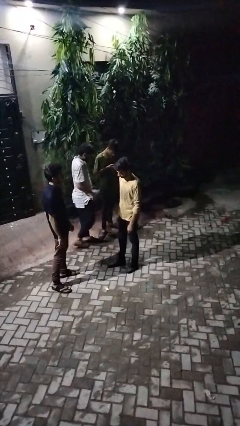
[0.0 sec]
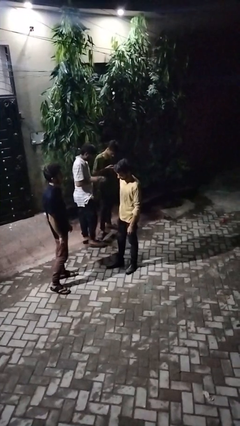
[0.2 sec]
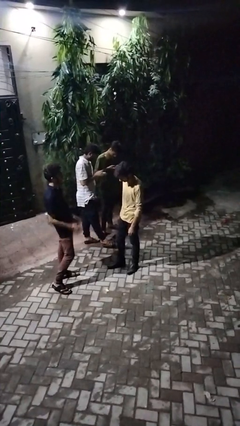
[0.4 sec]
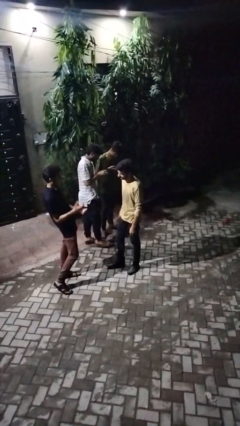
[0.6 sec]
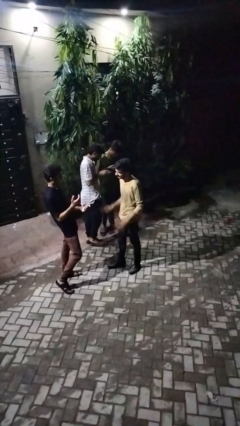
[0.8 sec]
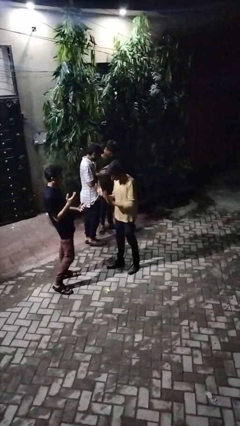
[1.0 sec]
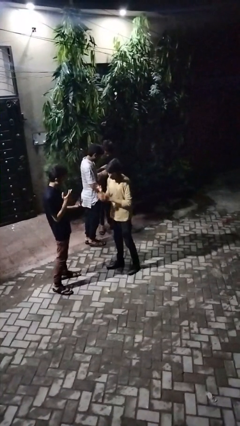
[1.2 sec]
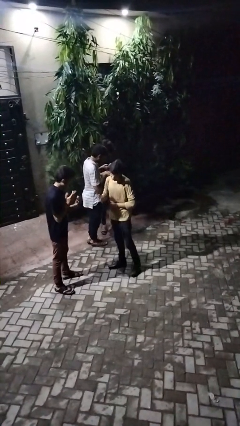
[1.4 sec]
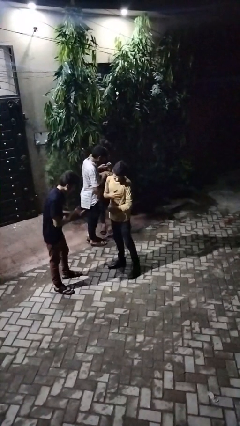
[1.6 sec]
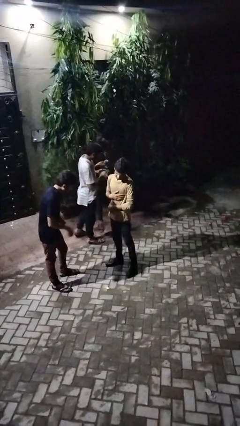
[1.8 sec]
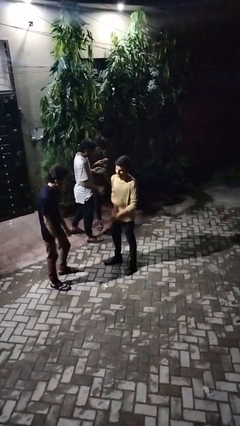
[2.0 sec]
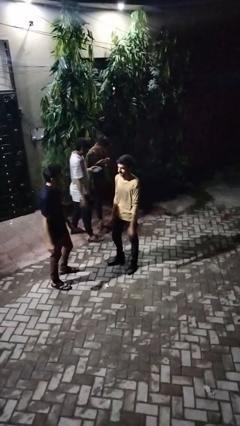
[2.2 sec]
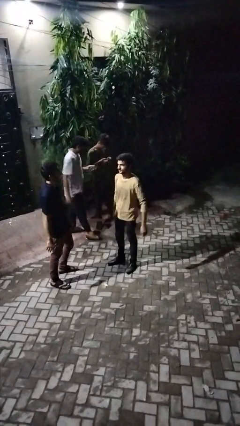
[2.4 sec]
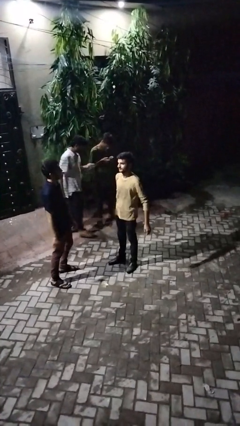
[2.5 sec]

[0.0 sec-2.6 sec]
person laughs with person

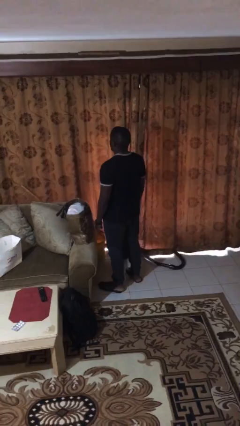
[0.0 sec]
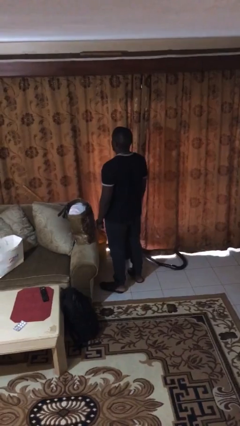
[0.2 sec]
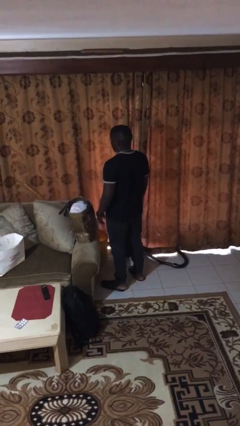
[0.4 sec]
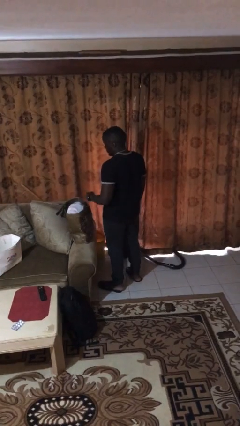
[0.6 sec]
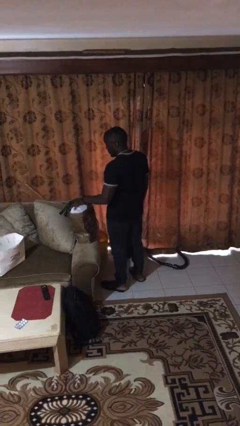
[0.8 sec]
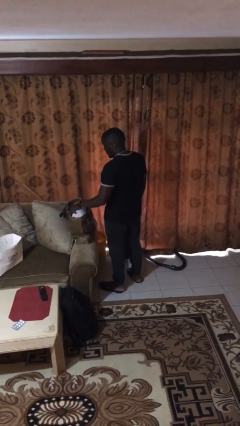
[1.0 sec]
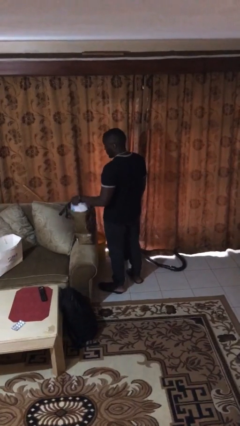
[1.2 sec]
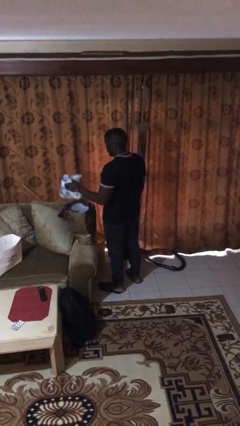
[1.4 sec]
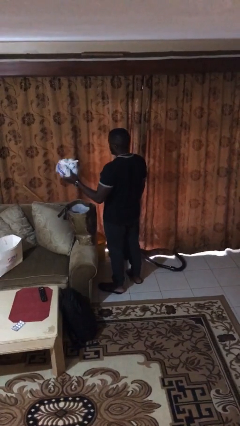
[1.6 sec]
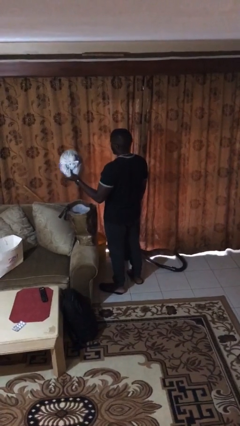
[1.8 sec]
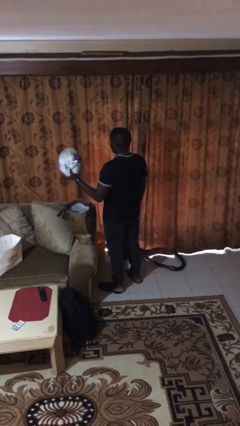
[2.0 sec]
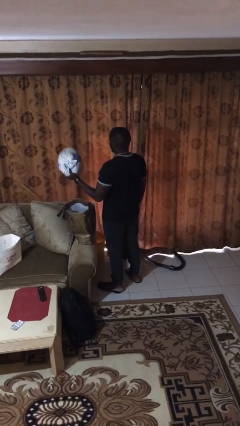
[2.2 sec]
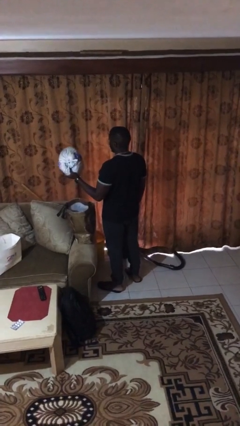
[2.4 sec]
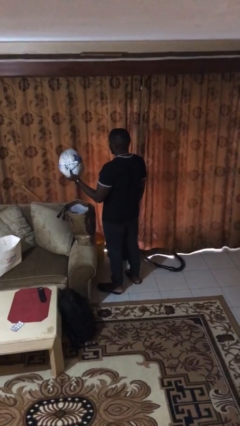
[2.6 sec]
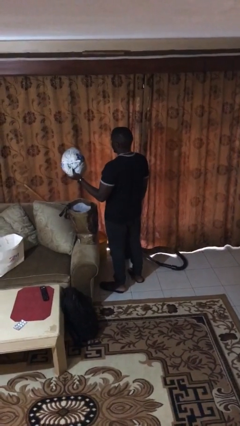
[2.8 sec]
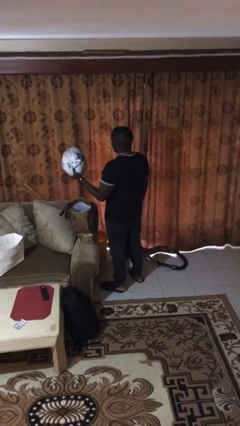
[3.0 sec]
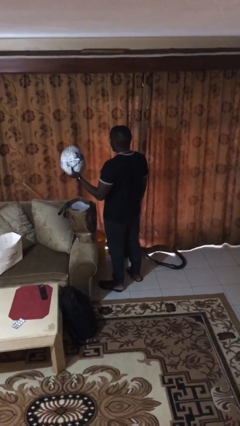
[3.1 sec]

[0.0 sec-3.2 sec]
person takes object from bag

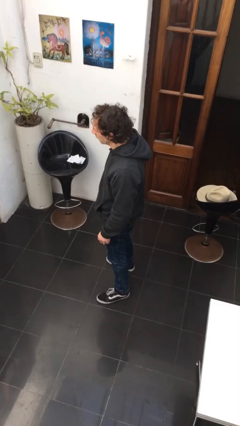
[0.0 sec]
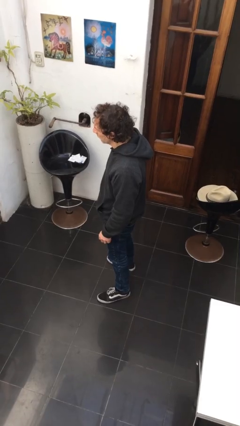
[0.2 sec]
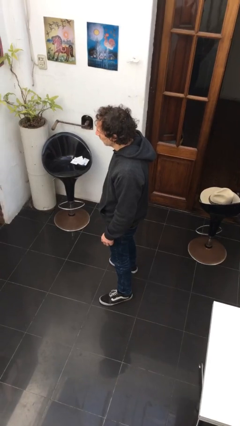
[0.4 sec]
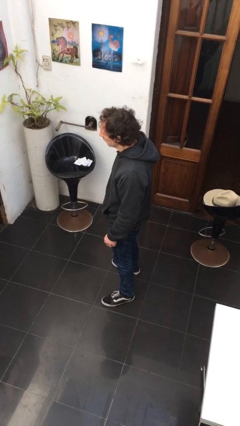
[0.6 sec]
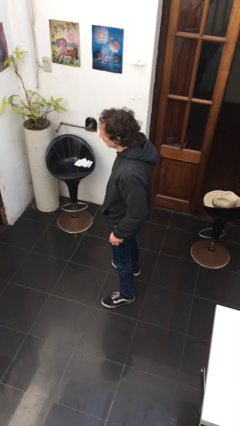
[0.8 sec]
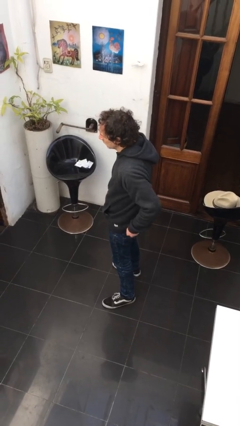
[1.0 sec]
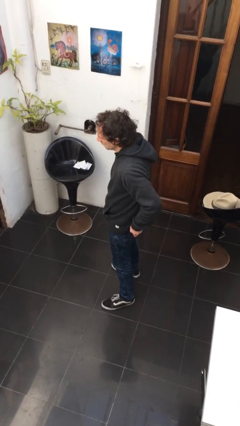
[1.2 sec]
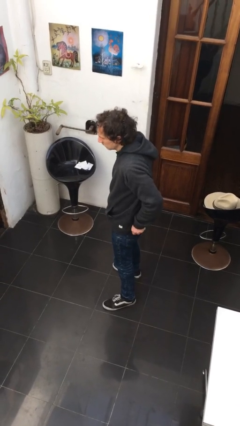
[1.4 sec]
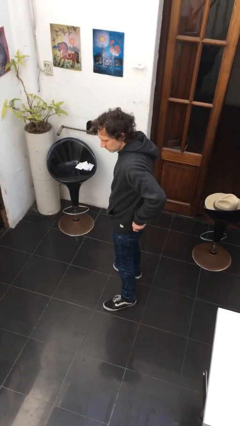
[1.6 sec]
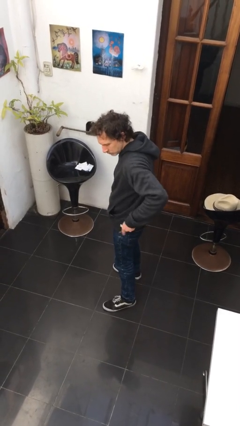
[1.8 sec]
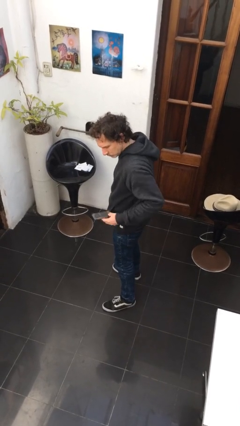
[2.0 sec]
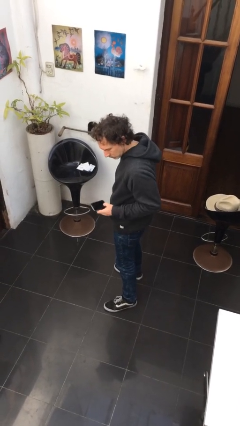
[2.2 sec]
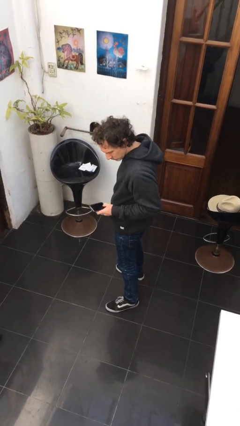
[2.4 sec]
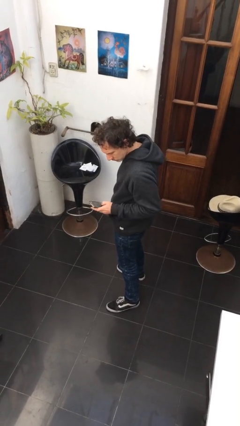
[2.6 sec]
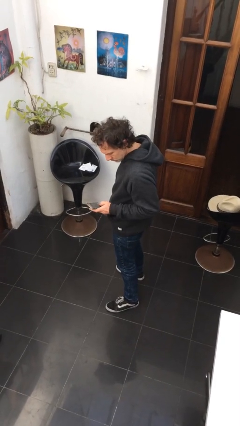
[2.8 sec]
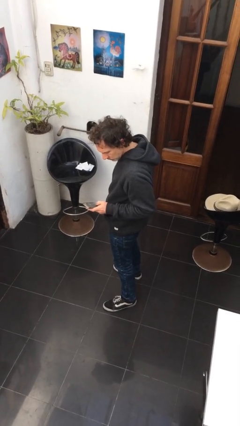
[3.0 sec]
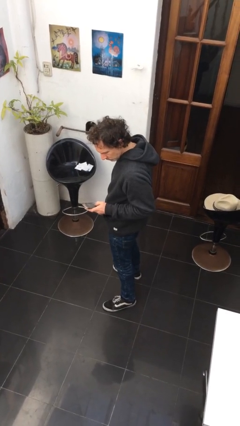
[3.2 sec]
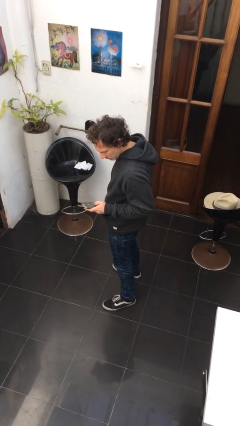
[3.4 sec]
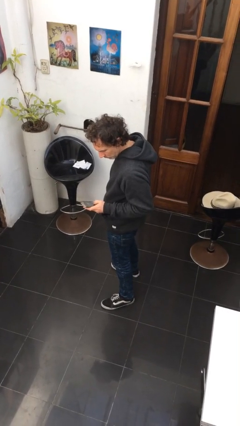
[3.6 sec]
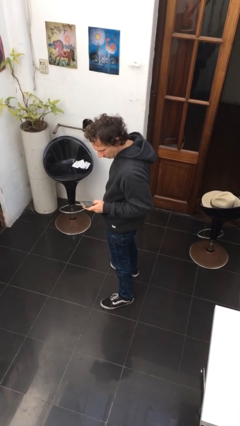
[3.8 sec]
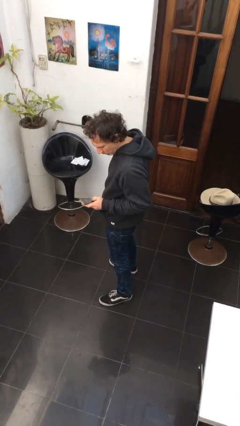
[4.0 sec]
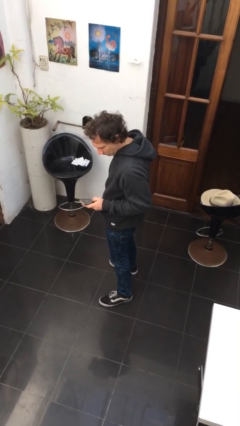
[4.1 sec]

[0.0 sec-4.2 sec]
person takes phone from pocket

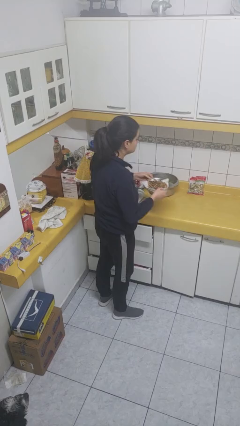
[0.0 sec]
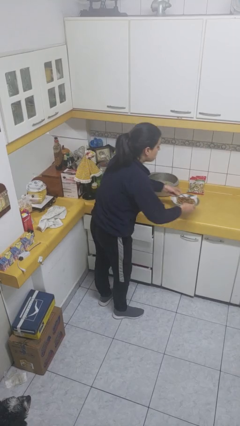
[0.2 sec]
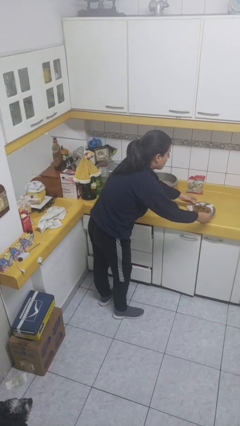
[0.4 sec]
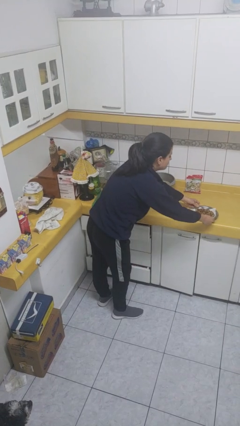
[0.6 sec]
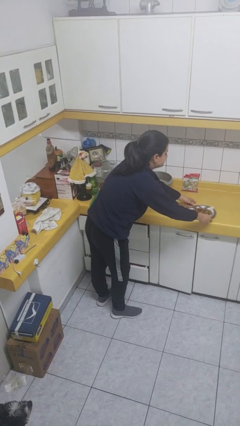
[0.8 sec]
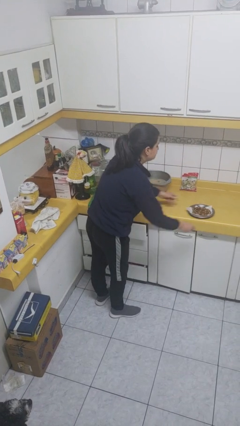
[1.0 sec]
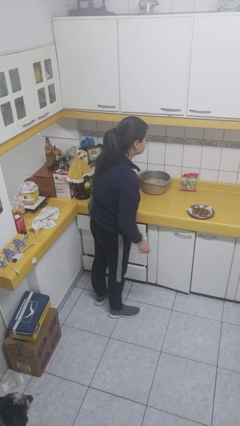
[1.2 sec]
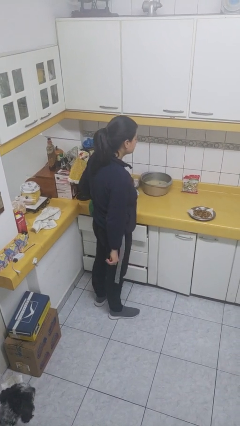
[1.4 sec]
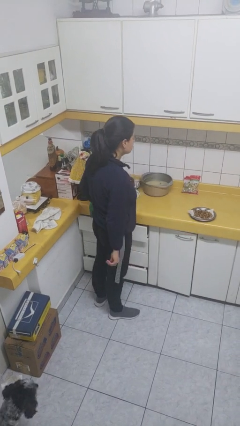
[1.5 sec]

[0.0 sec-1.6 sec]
person puts down object on countertop

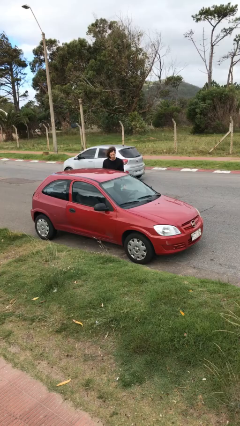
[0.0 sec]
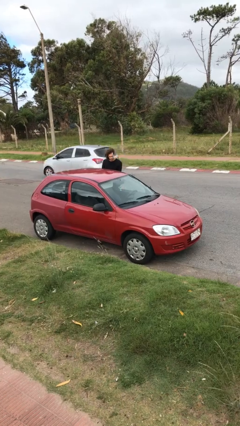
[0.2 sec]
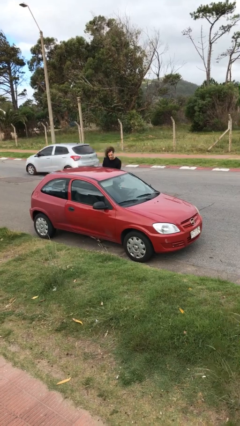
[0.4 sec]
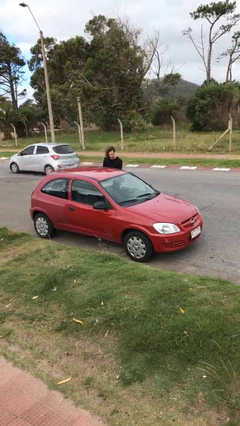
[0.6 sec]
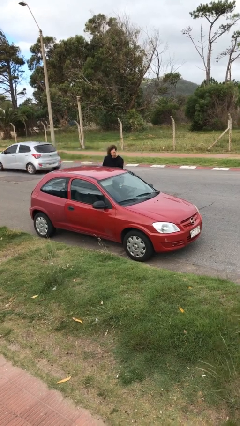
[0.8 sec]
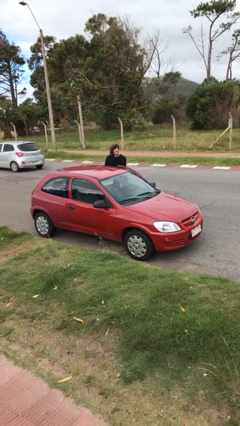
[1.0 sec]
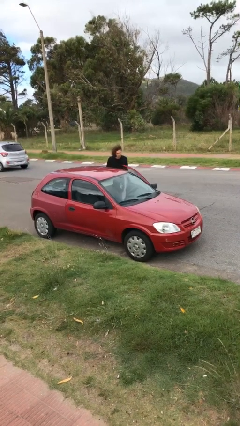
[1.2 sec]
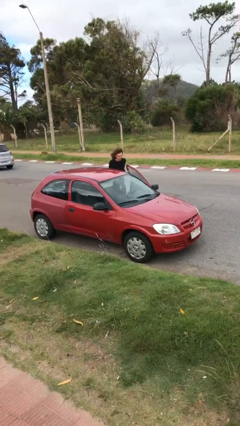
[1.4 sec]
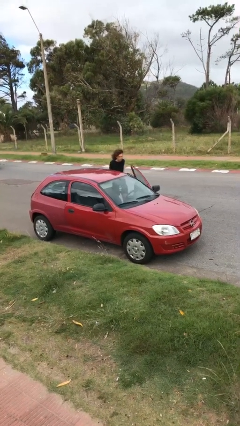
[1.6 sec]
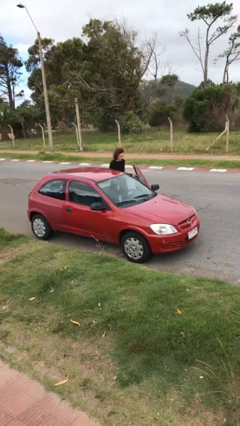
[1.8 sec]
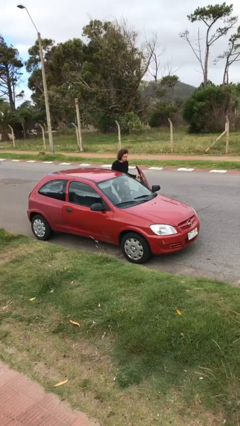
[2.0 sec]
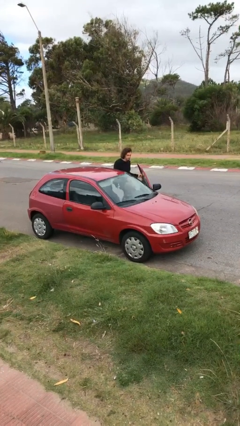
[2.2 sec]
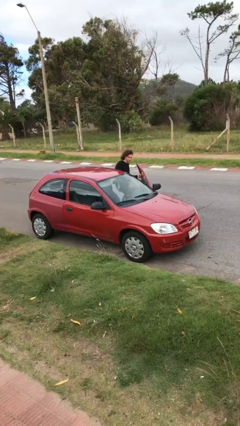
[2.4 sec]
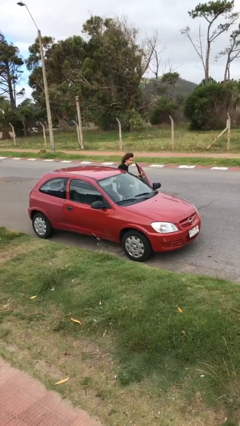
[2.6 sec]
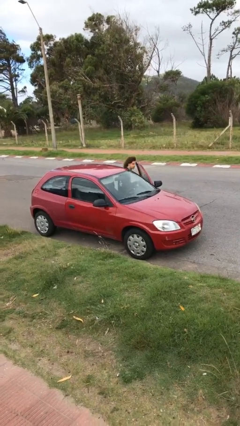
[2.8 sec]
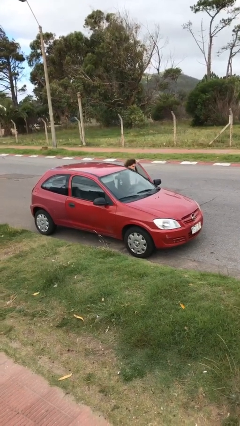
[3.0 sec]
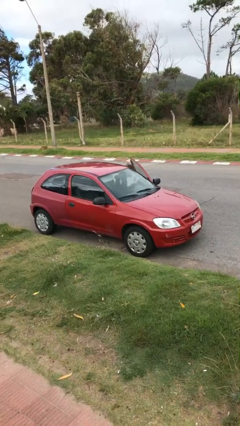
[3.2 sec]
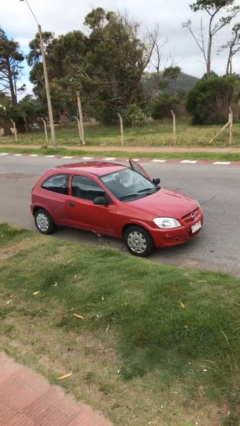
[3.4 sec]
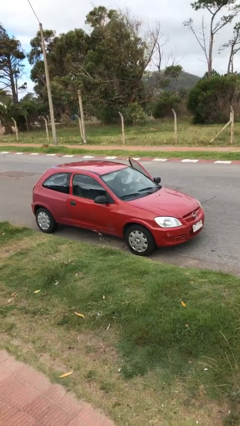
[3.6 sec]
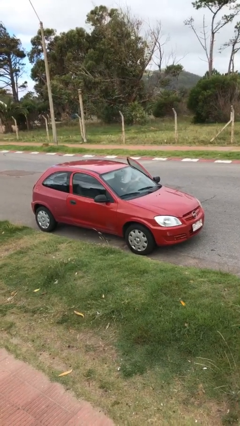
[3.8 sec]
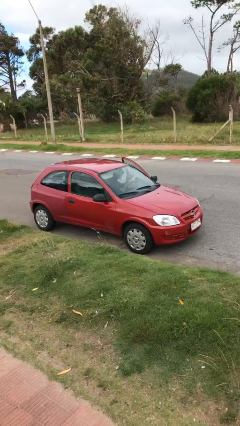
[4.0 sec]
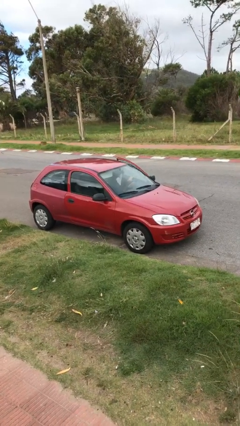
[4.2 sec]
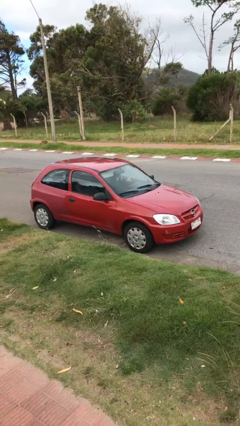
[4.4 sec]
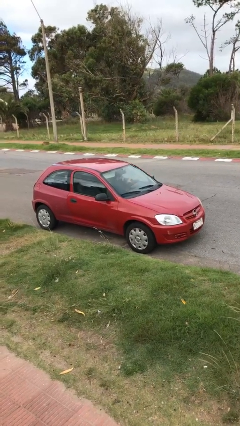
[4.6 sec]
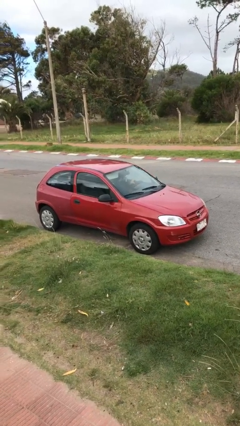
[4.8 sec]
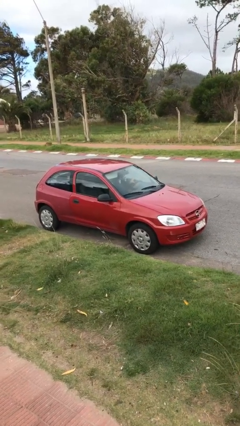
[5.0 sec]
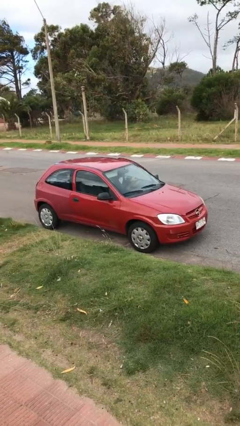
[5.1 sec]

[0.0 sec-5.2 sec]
car picks up person

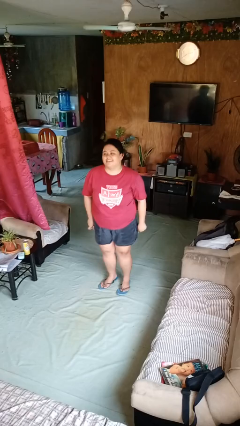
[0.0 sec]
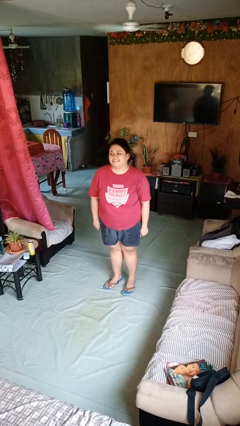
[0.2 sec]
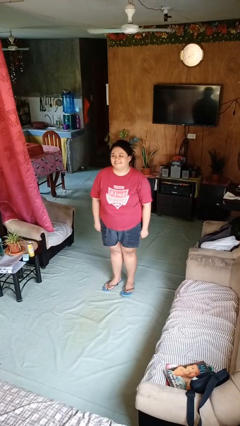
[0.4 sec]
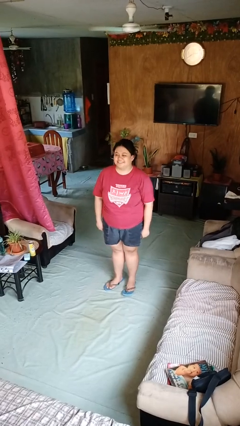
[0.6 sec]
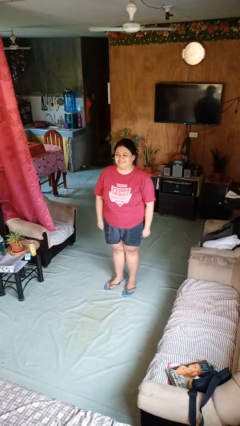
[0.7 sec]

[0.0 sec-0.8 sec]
person stands up
